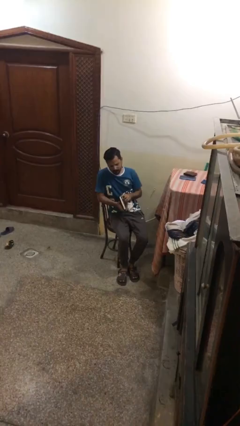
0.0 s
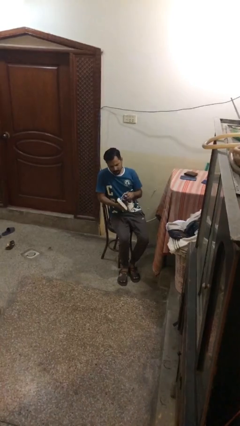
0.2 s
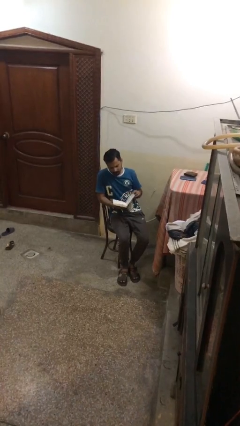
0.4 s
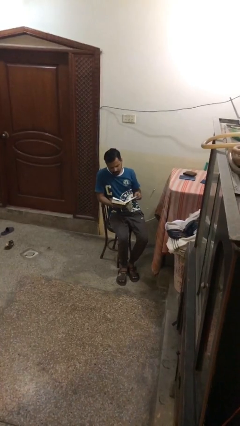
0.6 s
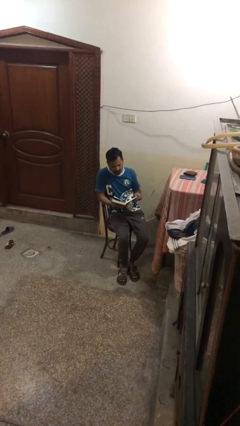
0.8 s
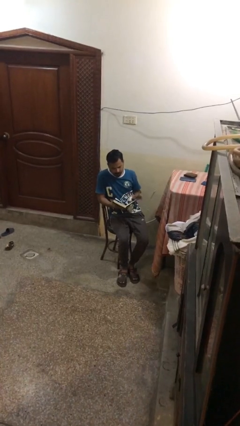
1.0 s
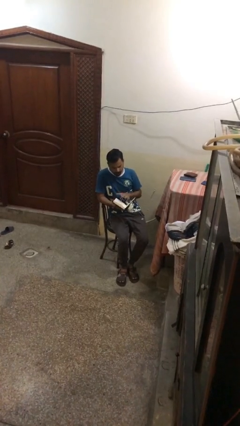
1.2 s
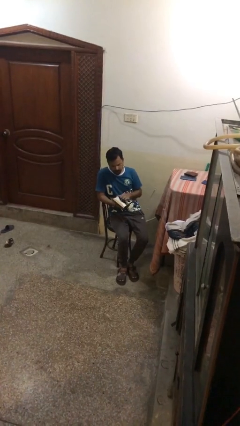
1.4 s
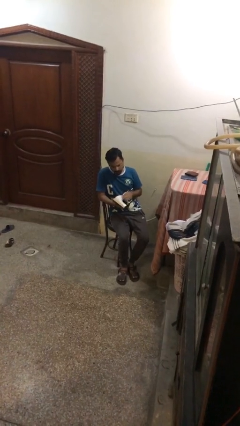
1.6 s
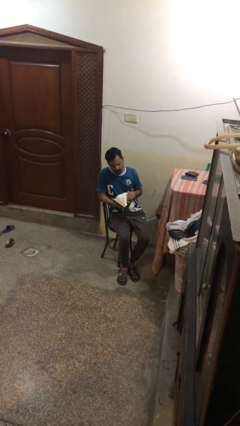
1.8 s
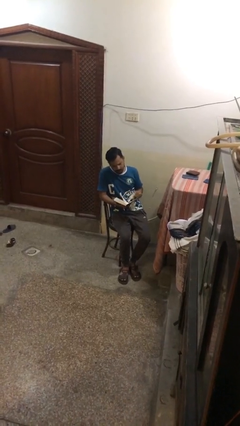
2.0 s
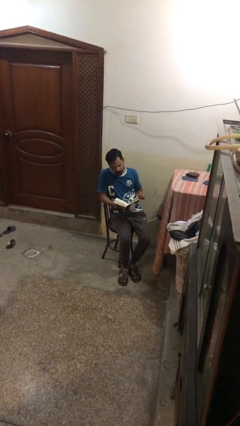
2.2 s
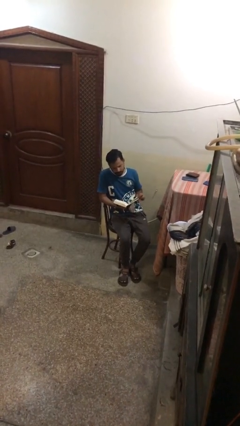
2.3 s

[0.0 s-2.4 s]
person reads document

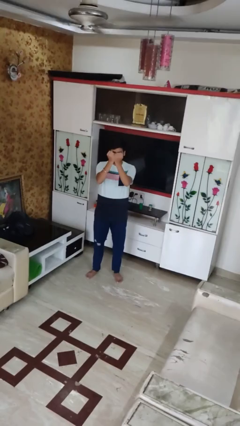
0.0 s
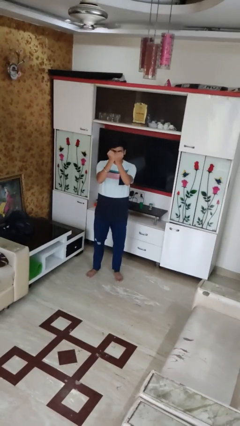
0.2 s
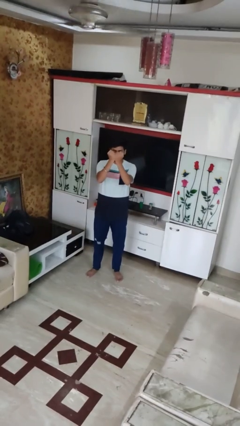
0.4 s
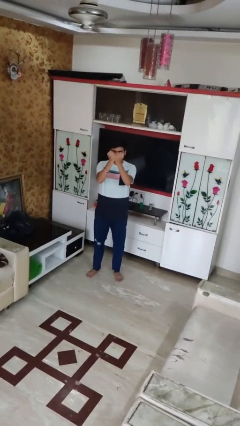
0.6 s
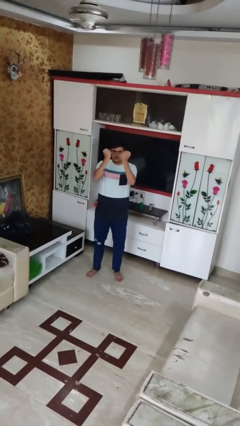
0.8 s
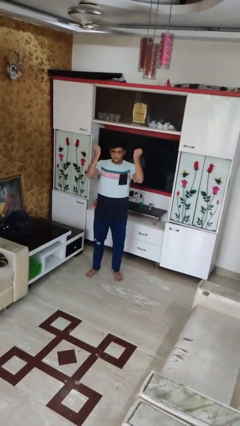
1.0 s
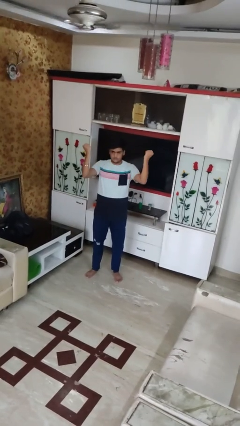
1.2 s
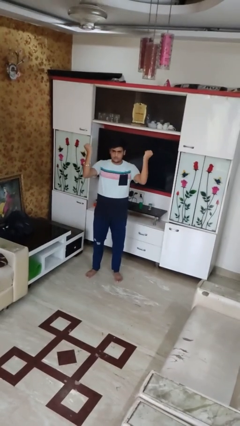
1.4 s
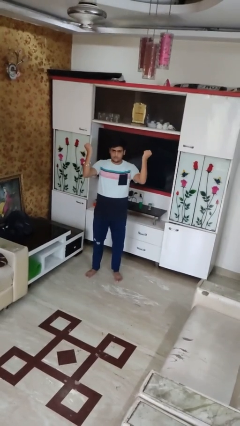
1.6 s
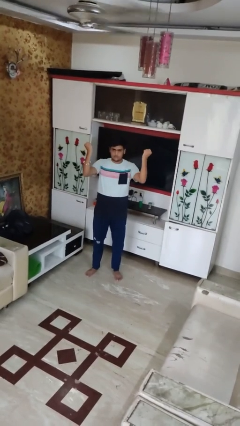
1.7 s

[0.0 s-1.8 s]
person gestures zoom in

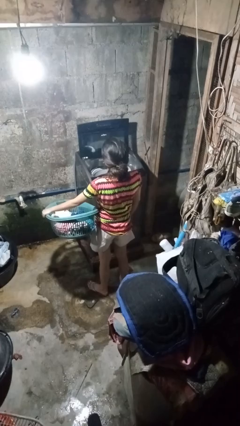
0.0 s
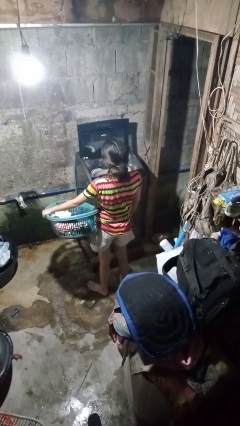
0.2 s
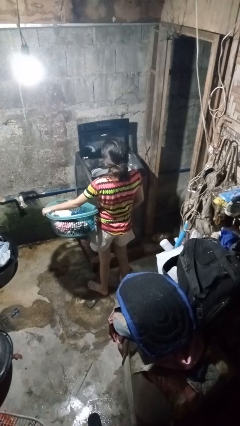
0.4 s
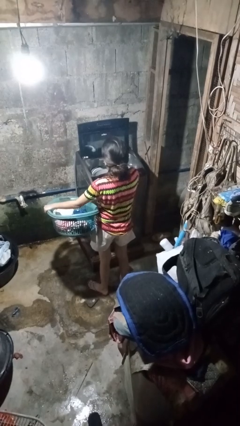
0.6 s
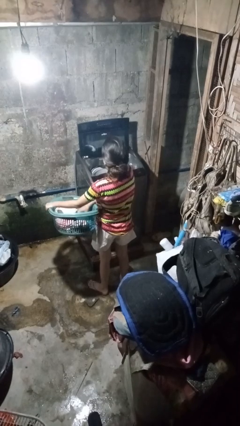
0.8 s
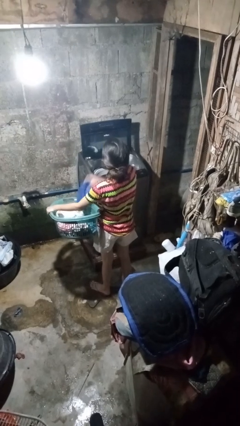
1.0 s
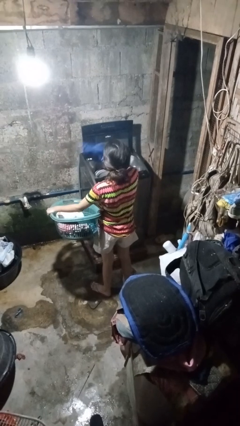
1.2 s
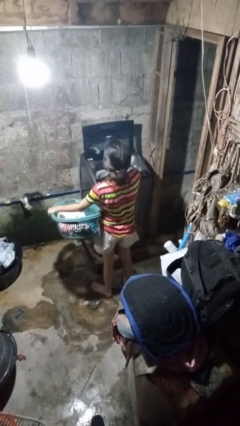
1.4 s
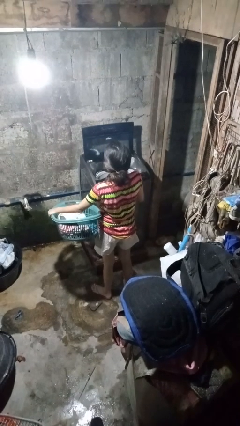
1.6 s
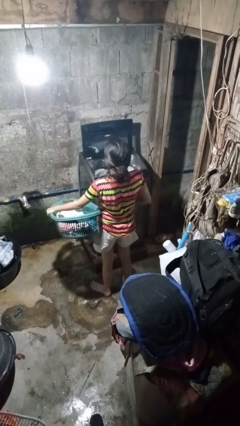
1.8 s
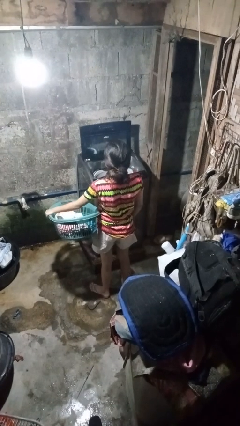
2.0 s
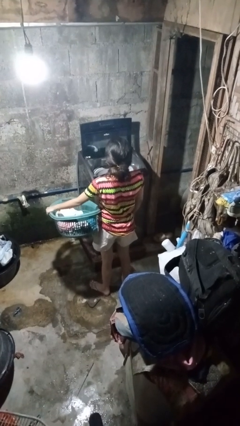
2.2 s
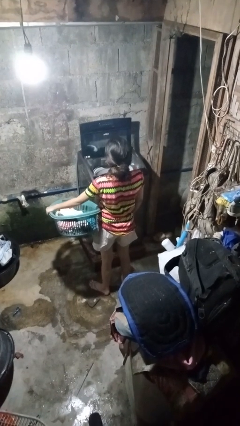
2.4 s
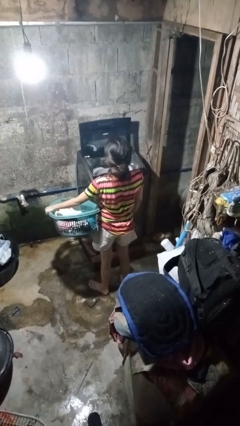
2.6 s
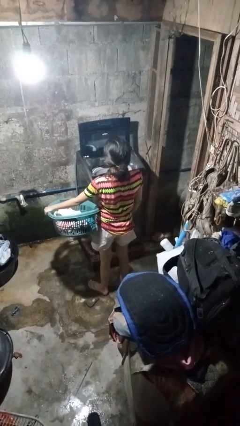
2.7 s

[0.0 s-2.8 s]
person loads clotheswasher

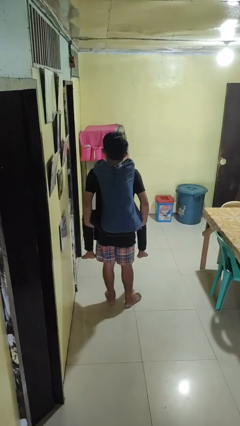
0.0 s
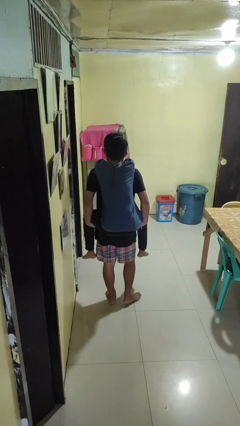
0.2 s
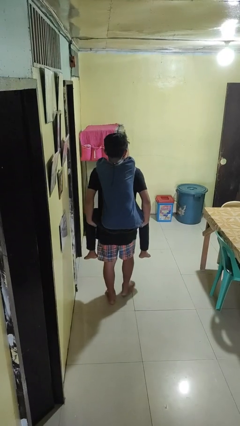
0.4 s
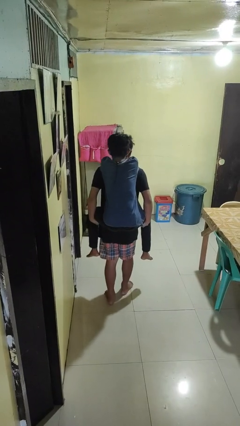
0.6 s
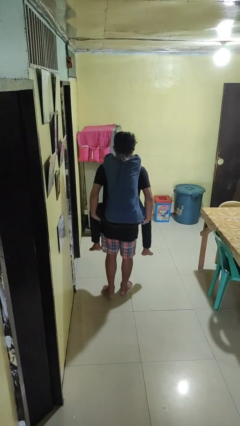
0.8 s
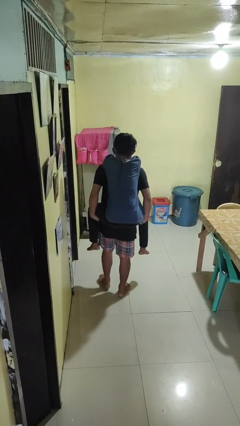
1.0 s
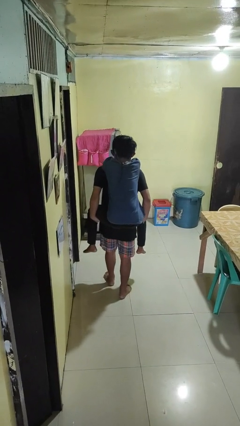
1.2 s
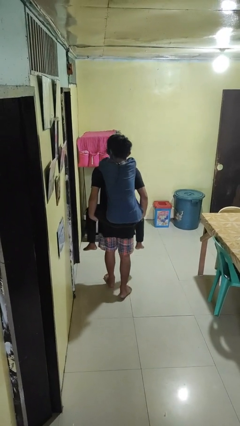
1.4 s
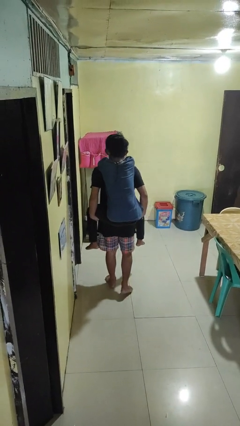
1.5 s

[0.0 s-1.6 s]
person carries person on back

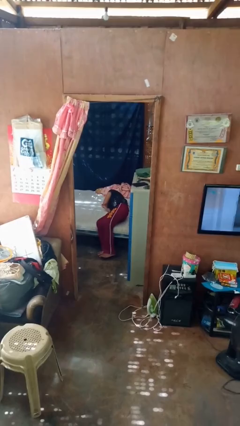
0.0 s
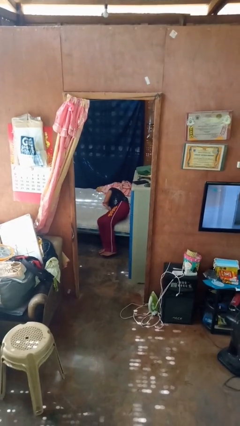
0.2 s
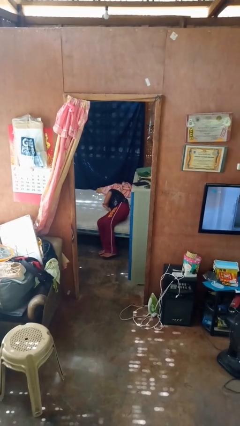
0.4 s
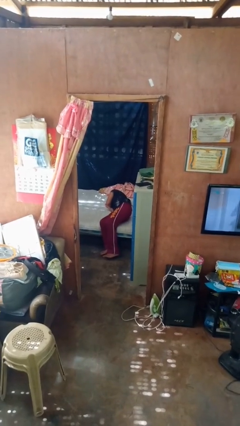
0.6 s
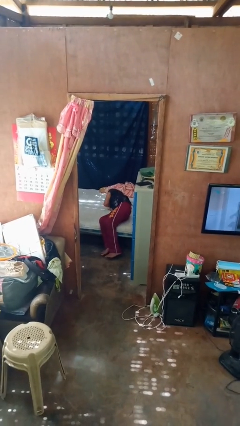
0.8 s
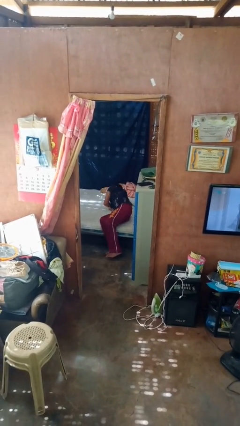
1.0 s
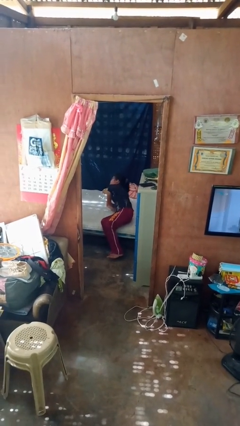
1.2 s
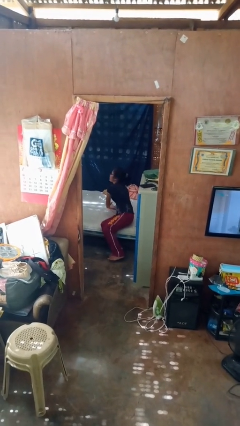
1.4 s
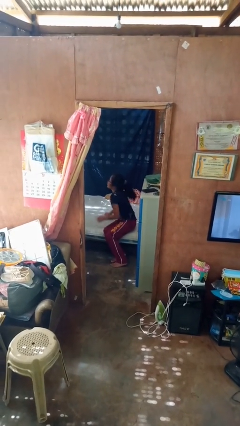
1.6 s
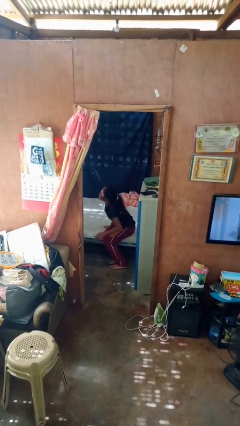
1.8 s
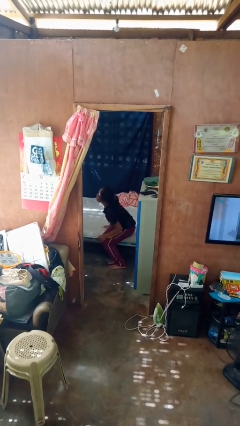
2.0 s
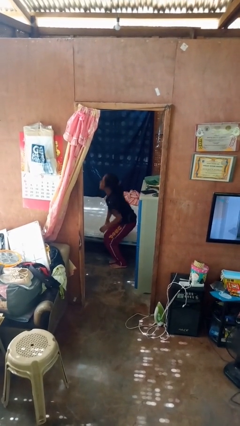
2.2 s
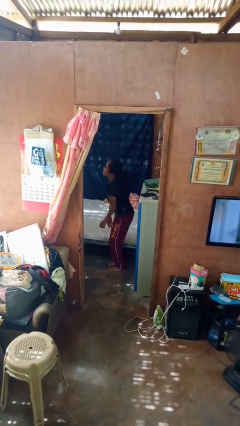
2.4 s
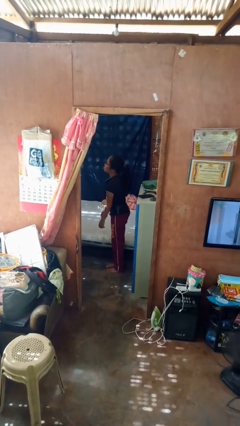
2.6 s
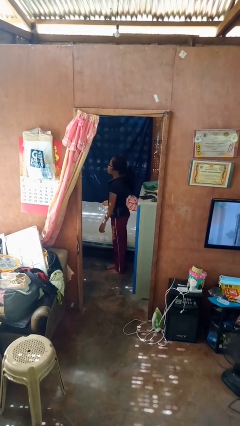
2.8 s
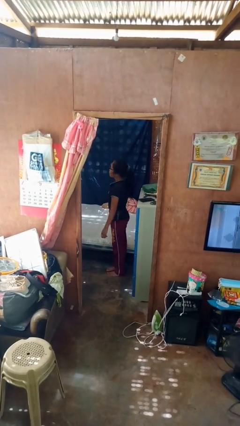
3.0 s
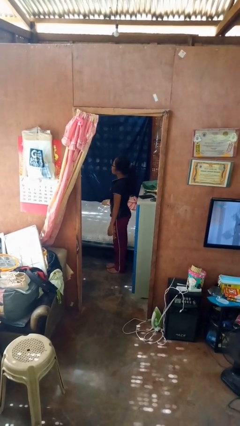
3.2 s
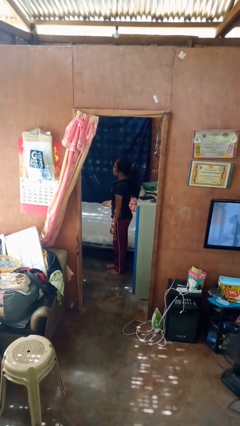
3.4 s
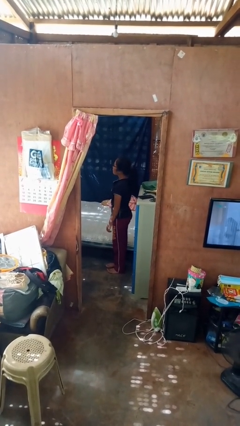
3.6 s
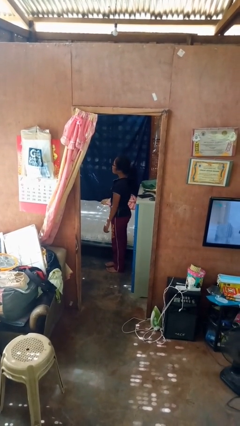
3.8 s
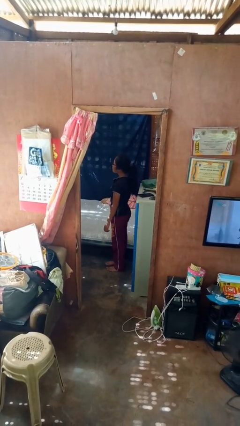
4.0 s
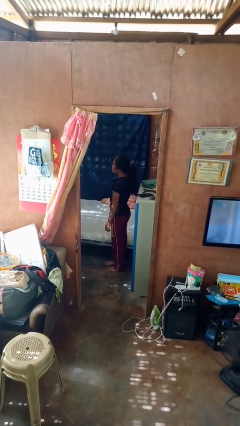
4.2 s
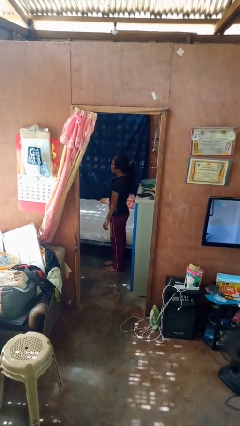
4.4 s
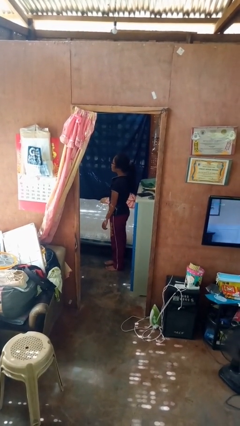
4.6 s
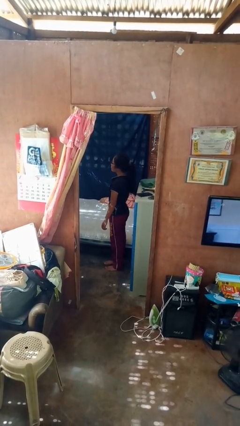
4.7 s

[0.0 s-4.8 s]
person stands up

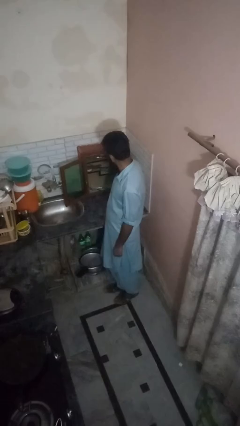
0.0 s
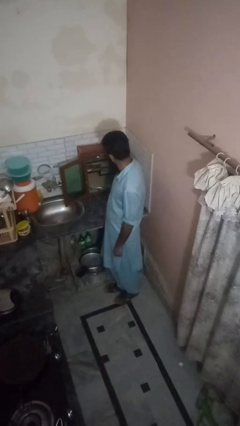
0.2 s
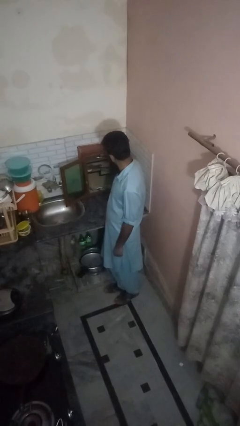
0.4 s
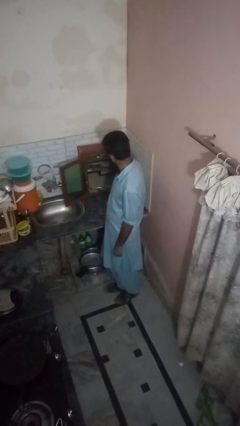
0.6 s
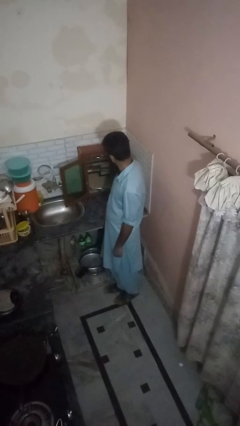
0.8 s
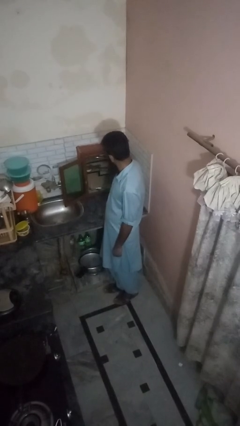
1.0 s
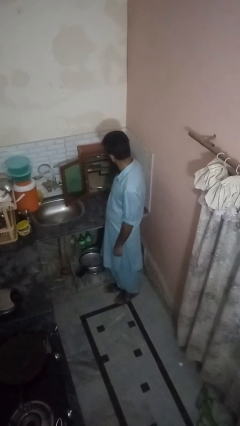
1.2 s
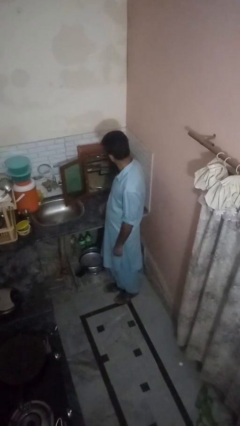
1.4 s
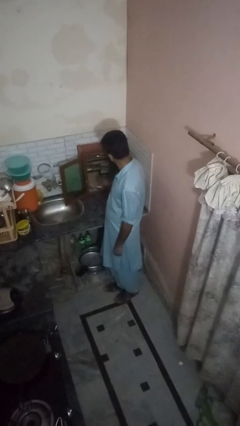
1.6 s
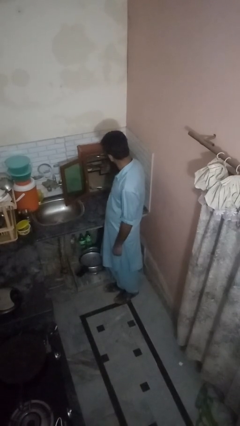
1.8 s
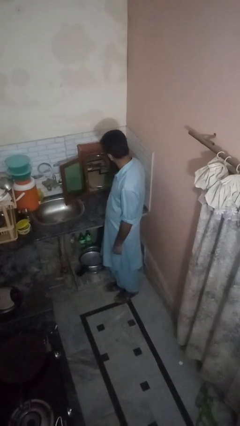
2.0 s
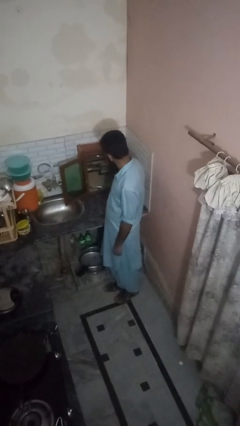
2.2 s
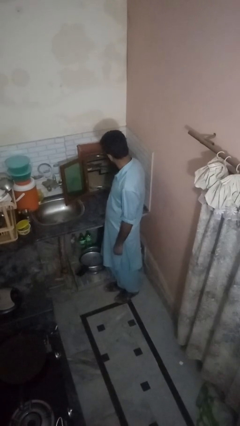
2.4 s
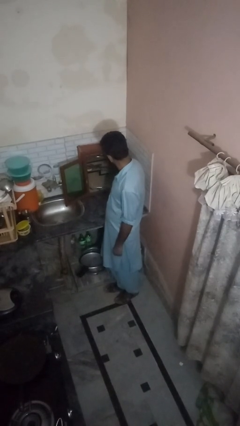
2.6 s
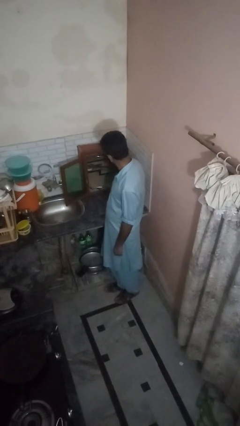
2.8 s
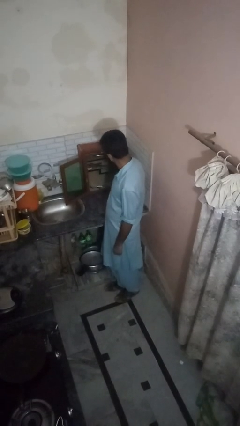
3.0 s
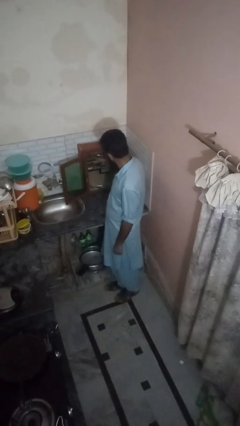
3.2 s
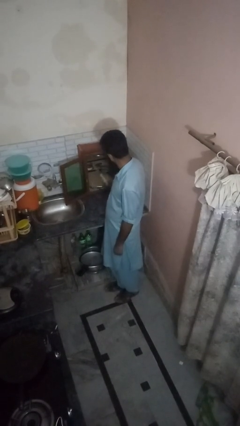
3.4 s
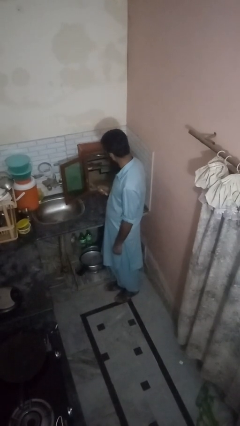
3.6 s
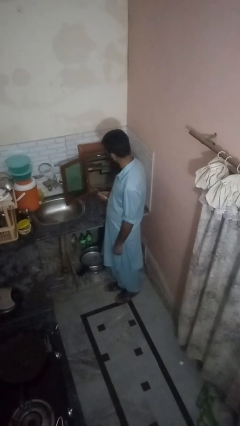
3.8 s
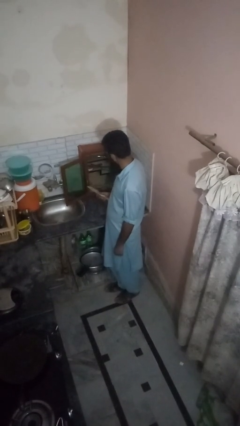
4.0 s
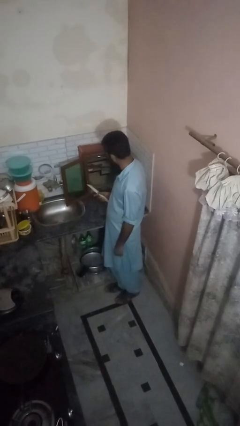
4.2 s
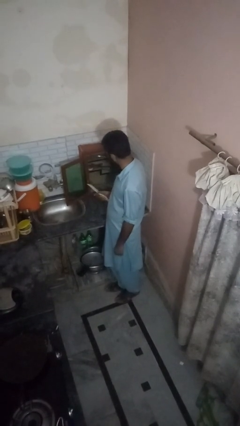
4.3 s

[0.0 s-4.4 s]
person takes object from kitchen drawer
